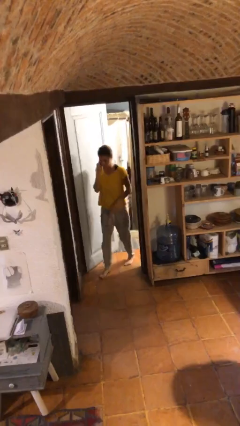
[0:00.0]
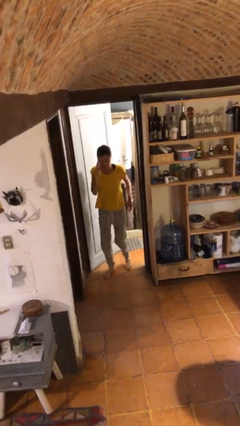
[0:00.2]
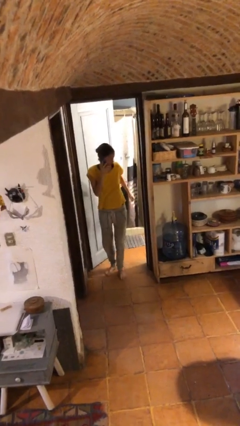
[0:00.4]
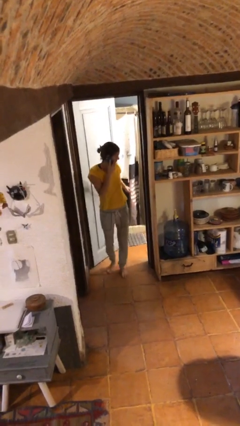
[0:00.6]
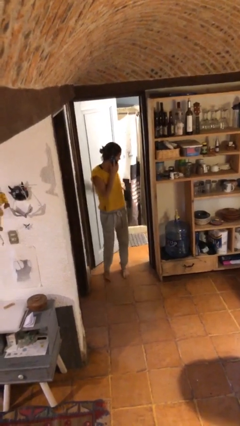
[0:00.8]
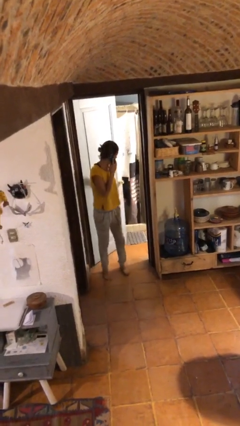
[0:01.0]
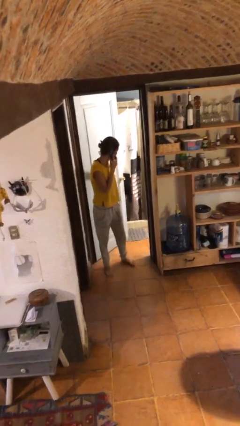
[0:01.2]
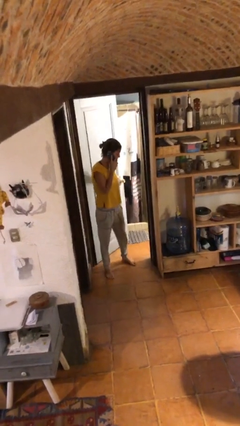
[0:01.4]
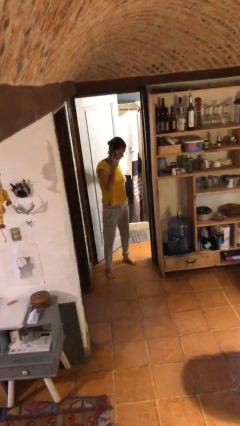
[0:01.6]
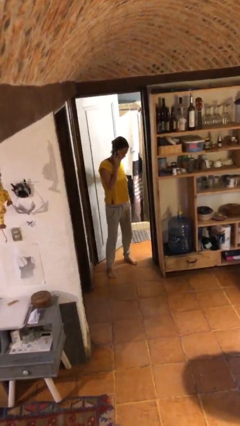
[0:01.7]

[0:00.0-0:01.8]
person enters scene through structure

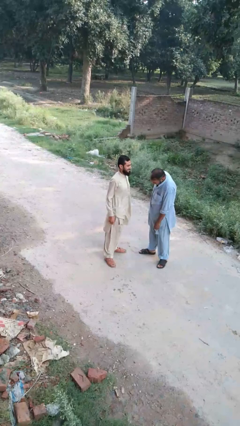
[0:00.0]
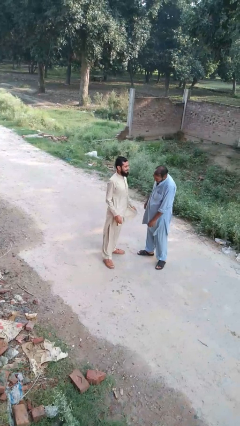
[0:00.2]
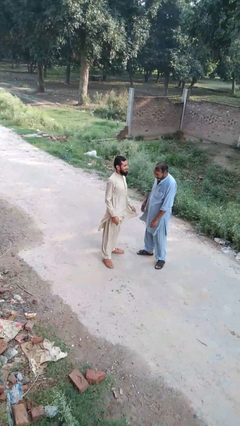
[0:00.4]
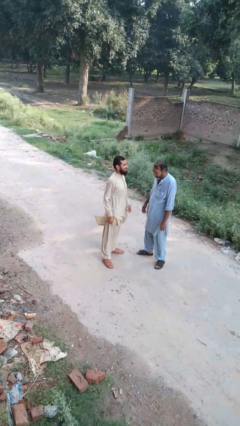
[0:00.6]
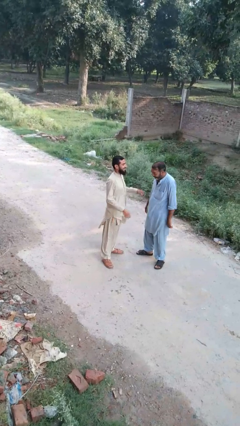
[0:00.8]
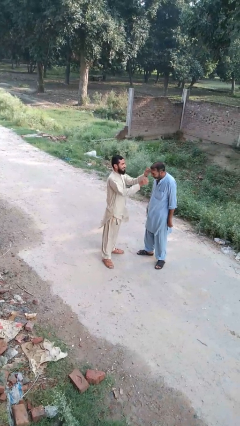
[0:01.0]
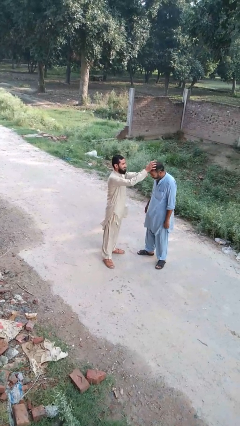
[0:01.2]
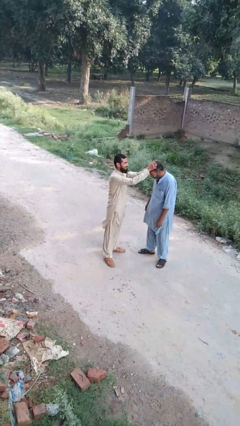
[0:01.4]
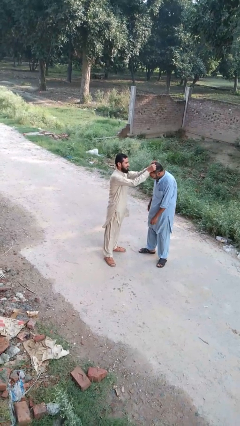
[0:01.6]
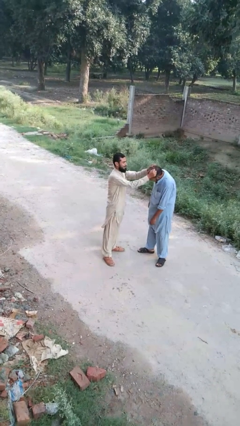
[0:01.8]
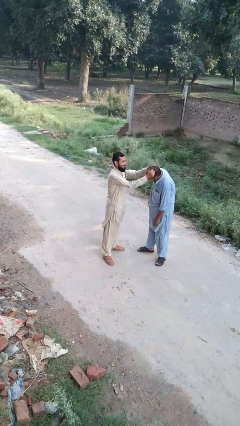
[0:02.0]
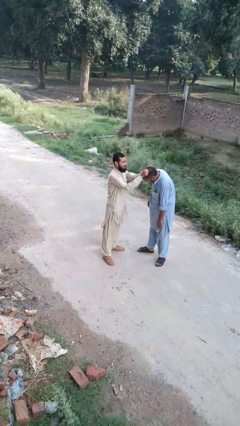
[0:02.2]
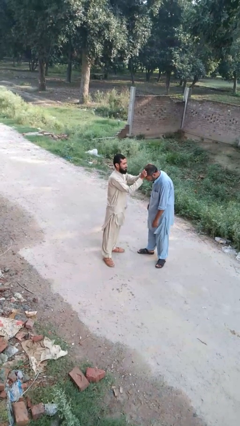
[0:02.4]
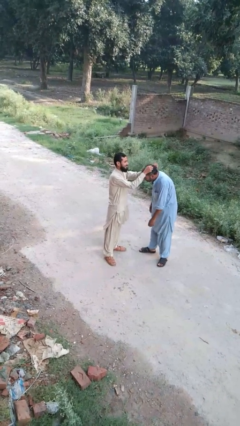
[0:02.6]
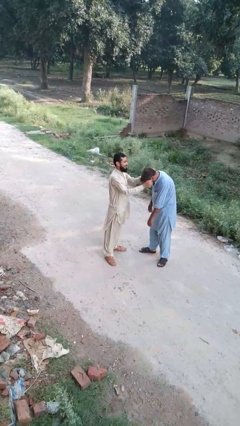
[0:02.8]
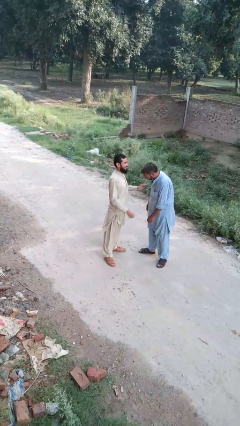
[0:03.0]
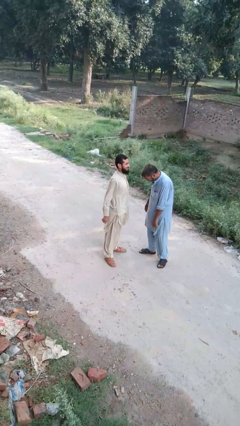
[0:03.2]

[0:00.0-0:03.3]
person grabs person by hair

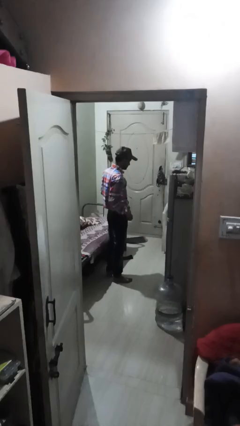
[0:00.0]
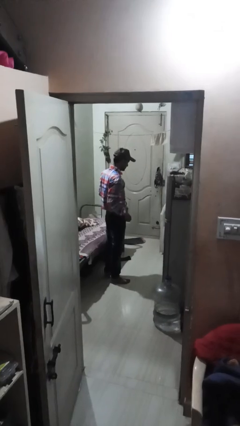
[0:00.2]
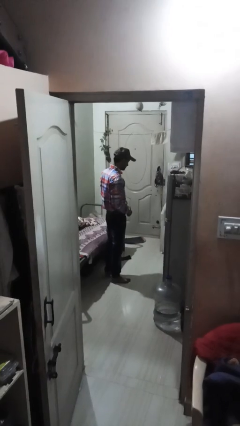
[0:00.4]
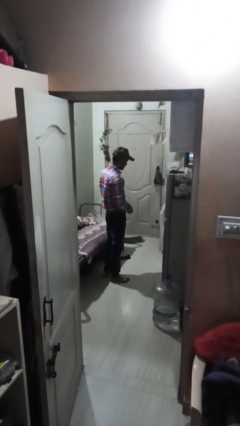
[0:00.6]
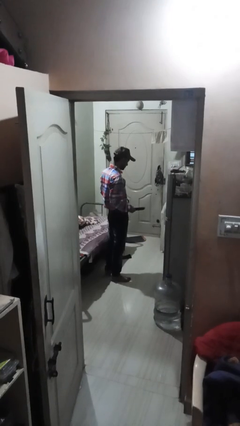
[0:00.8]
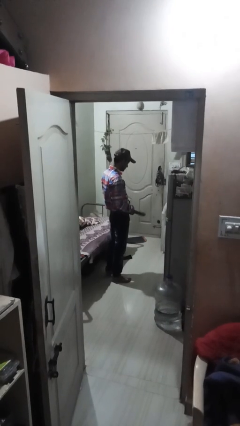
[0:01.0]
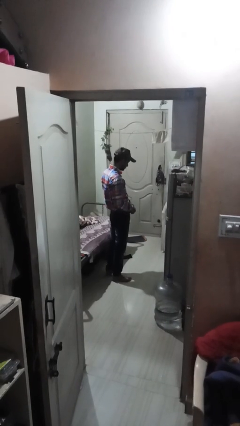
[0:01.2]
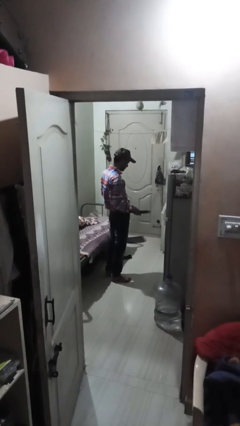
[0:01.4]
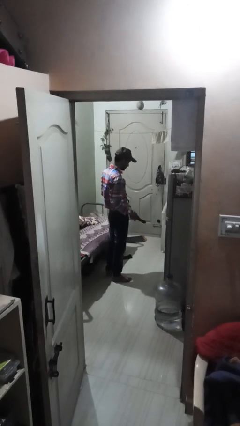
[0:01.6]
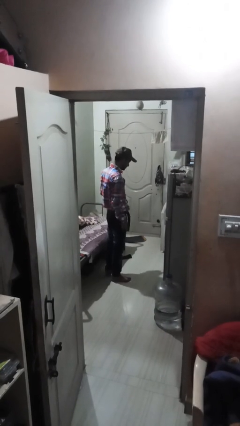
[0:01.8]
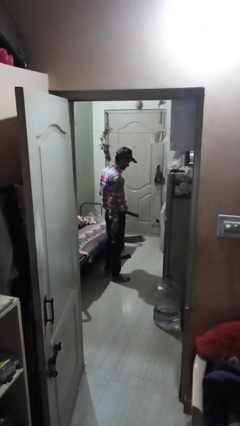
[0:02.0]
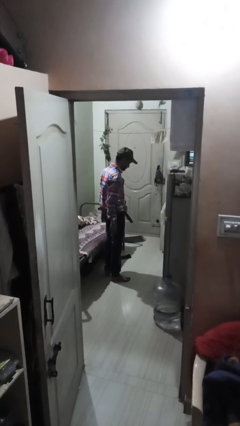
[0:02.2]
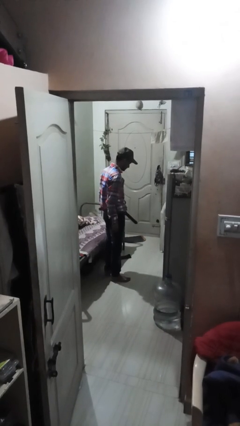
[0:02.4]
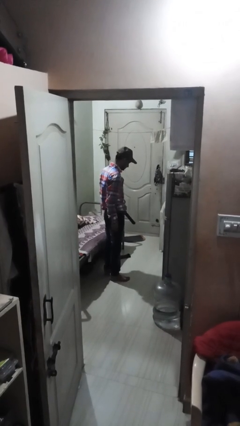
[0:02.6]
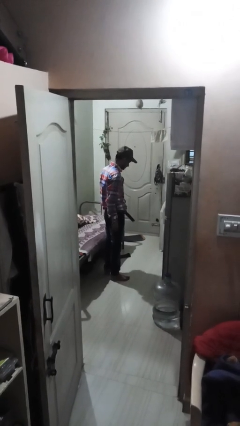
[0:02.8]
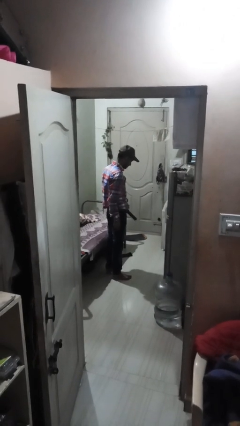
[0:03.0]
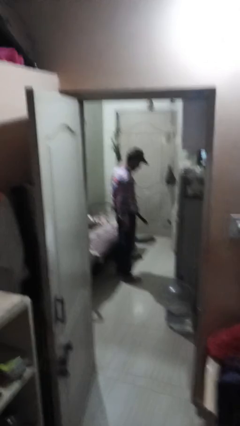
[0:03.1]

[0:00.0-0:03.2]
person takes off belt

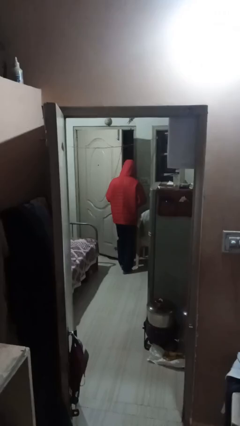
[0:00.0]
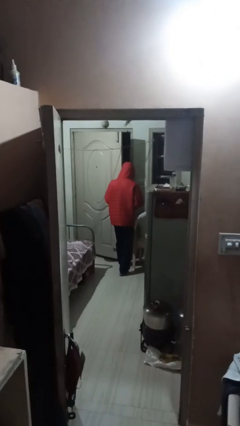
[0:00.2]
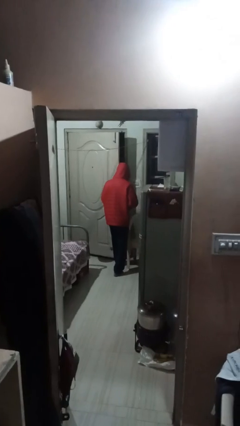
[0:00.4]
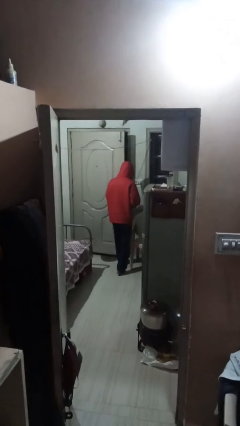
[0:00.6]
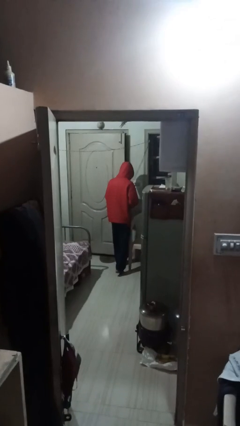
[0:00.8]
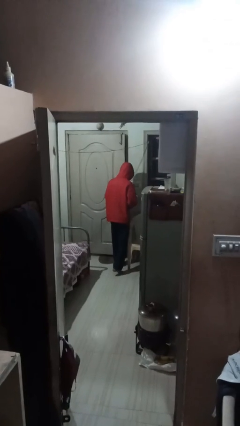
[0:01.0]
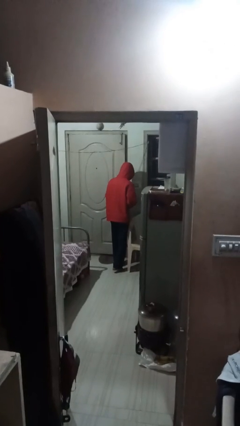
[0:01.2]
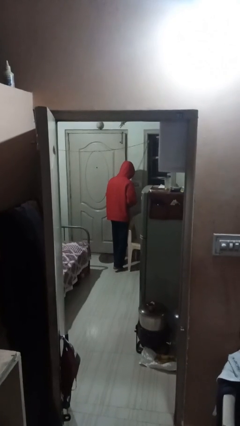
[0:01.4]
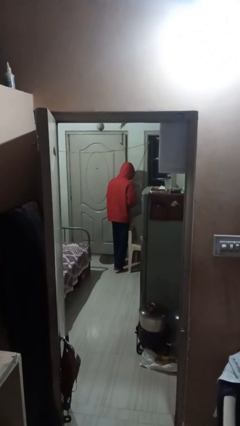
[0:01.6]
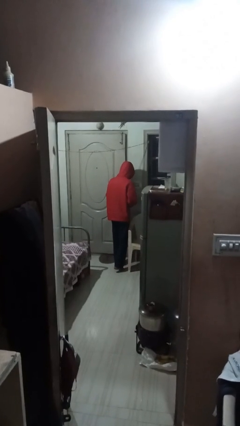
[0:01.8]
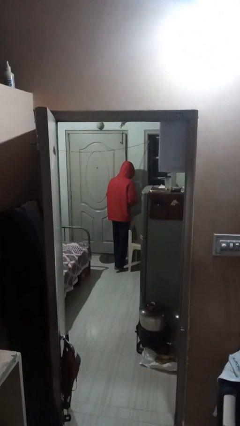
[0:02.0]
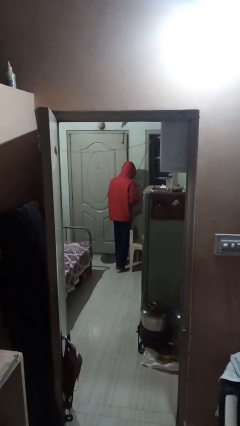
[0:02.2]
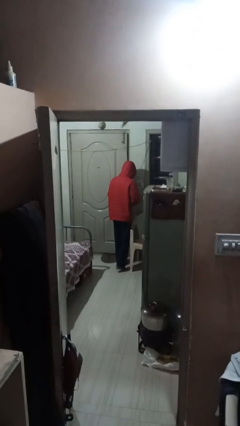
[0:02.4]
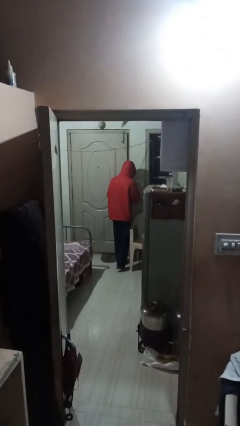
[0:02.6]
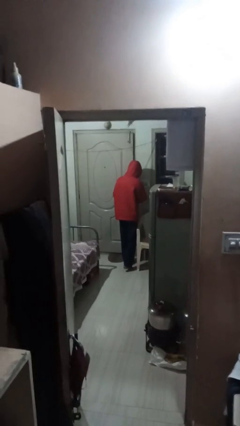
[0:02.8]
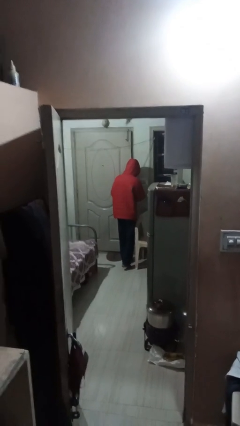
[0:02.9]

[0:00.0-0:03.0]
person closes facility door

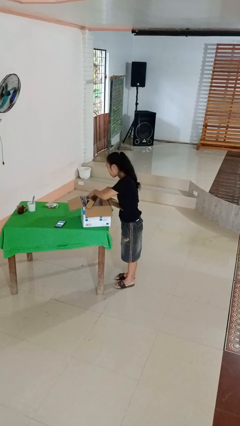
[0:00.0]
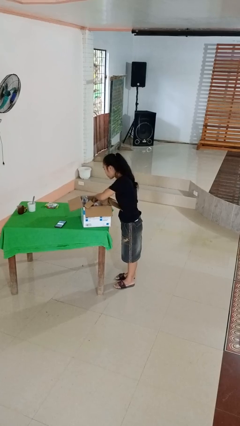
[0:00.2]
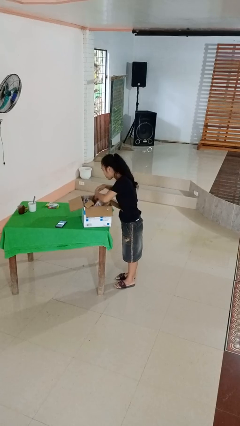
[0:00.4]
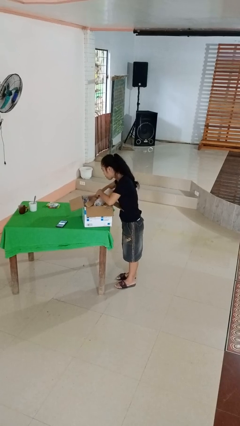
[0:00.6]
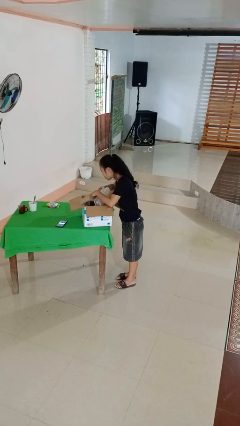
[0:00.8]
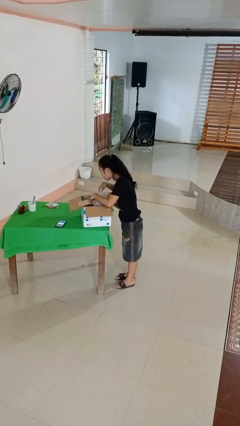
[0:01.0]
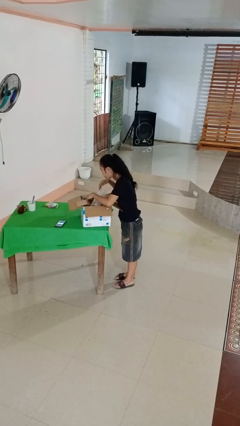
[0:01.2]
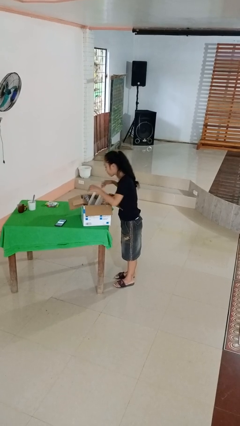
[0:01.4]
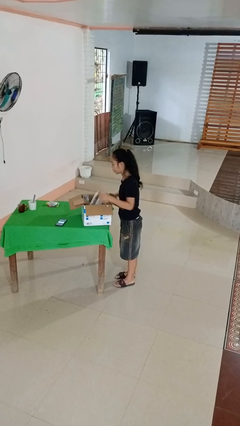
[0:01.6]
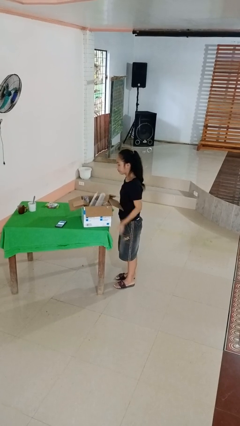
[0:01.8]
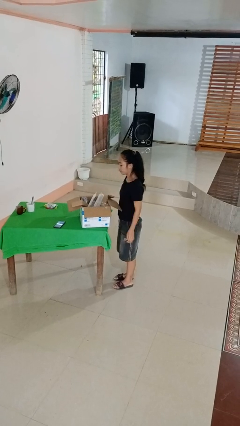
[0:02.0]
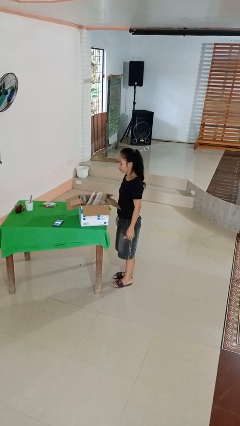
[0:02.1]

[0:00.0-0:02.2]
person searches in box

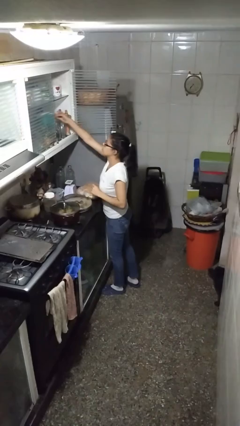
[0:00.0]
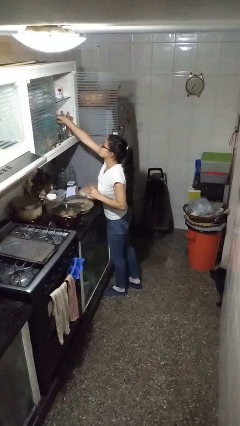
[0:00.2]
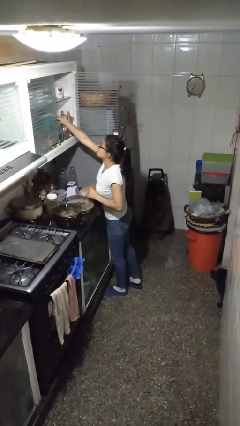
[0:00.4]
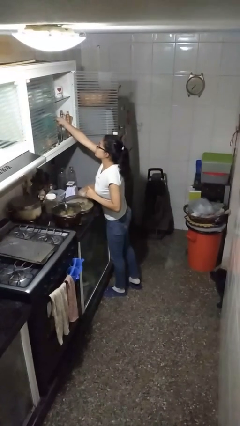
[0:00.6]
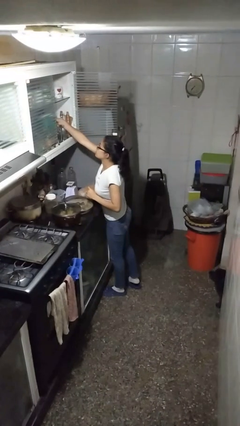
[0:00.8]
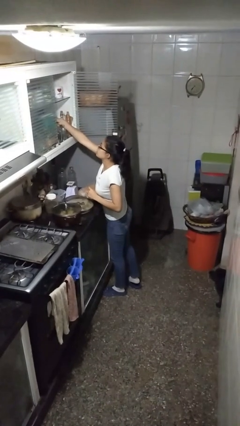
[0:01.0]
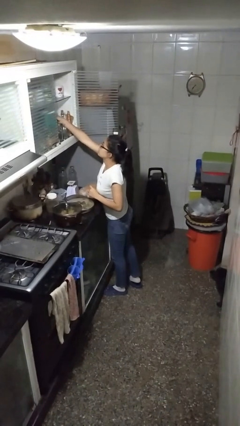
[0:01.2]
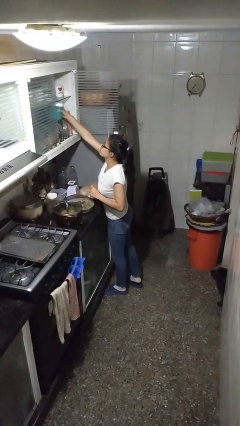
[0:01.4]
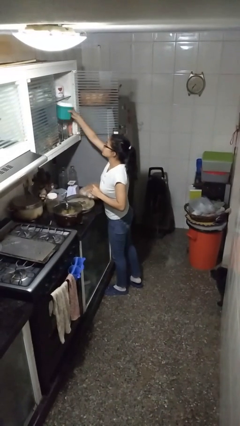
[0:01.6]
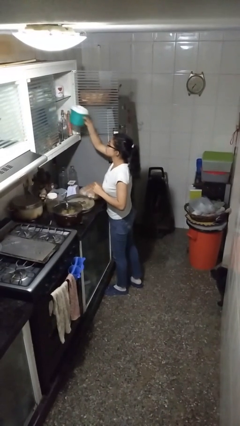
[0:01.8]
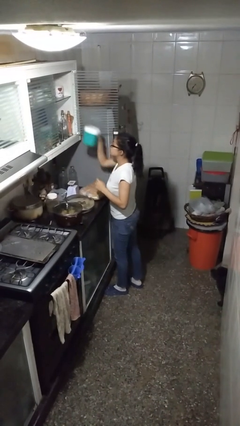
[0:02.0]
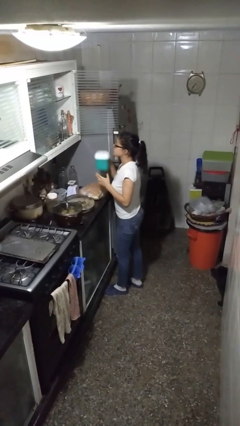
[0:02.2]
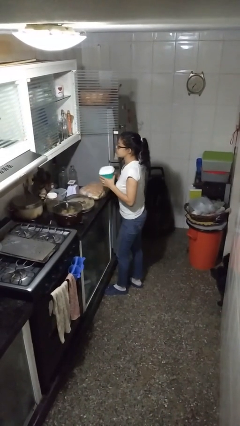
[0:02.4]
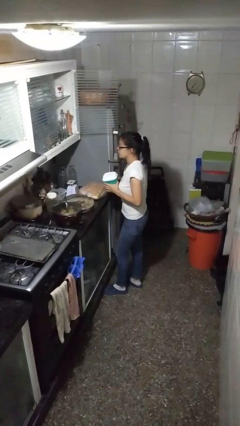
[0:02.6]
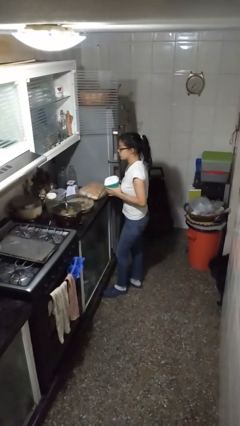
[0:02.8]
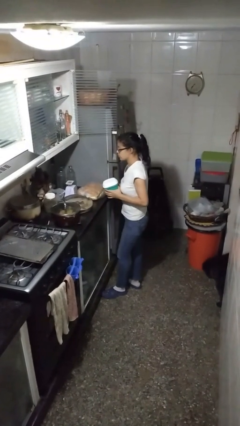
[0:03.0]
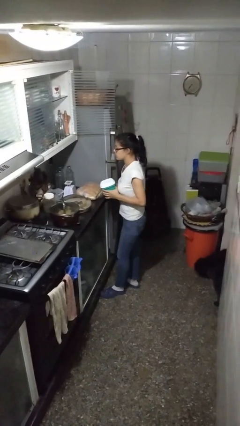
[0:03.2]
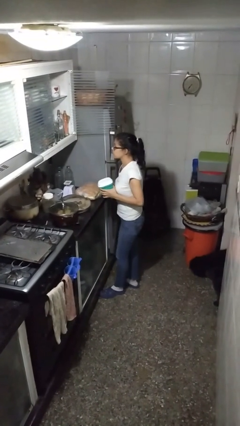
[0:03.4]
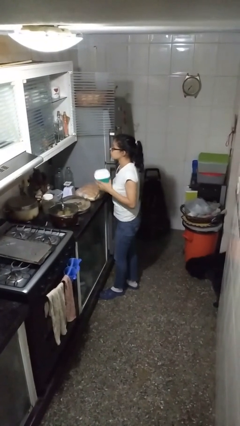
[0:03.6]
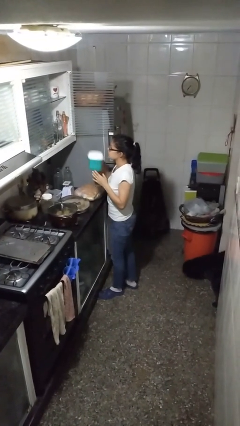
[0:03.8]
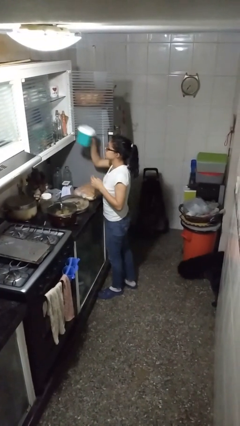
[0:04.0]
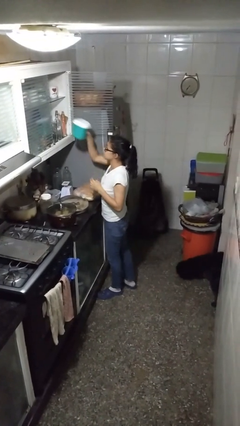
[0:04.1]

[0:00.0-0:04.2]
person picks up object from cabinet
